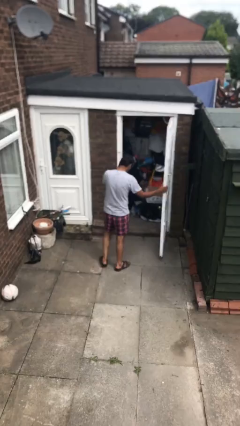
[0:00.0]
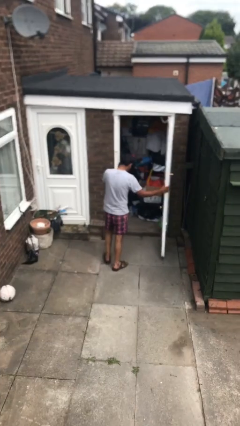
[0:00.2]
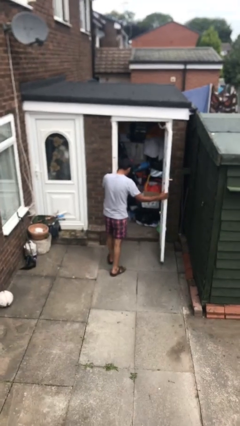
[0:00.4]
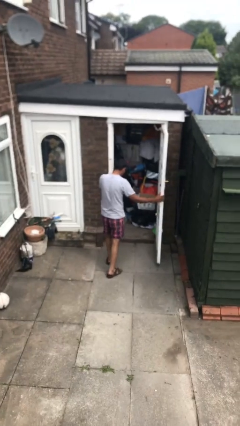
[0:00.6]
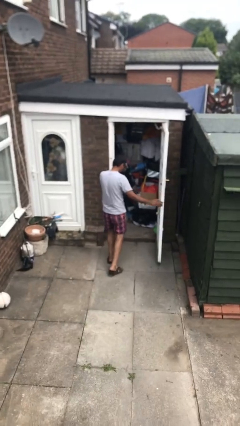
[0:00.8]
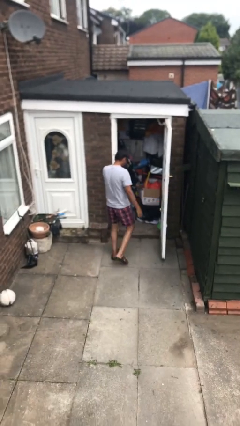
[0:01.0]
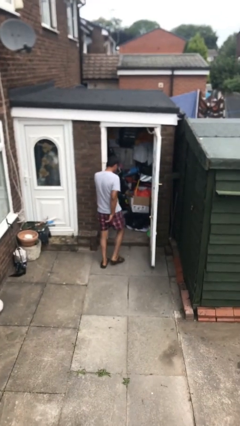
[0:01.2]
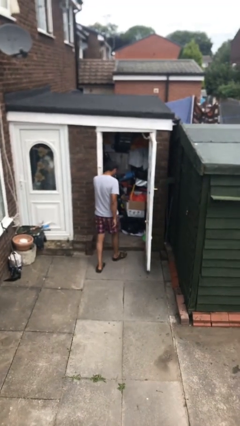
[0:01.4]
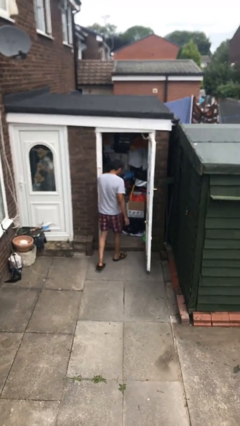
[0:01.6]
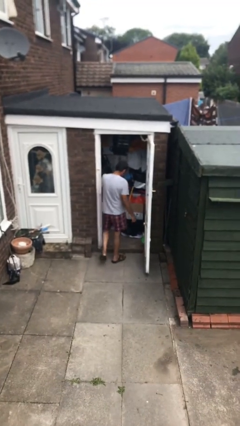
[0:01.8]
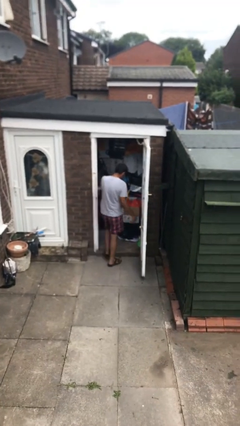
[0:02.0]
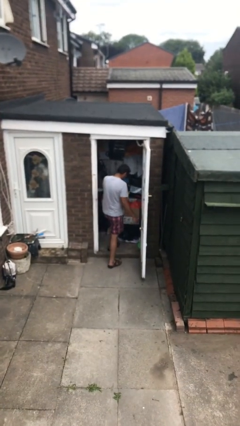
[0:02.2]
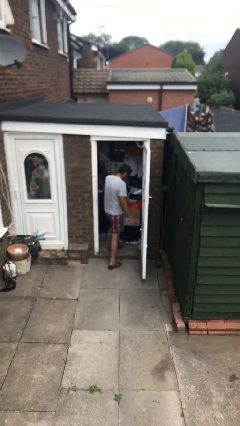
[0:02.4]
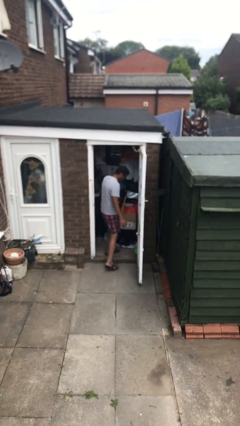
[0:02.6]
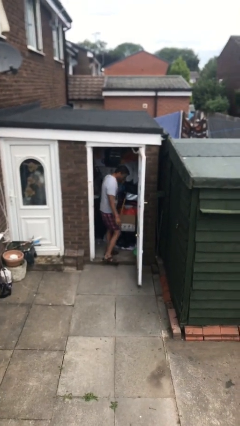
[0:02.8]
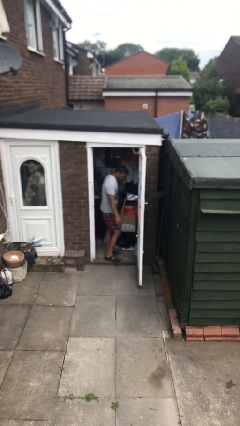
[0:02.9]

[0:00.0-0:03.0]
person exits scene through structure

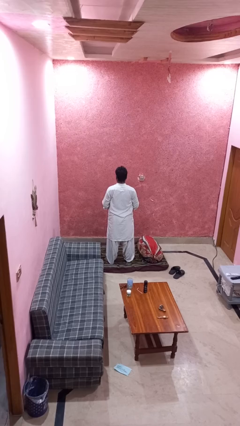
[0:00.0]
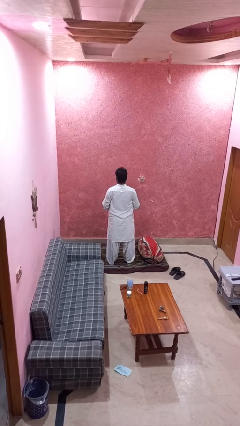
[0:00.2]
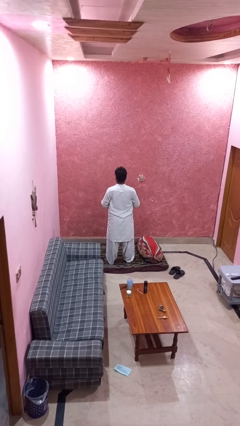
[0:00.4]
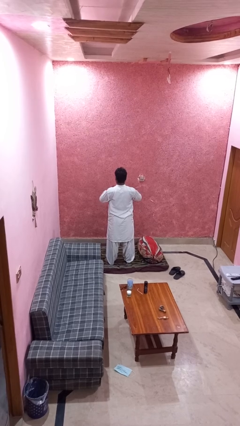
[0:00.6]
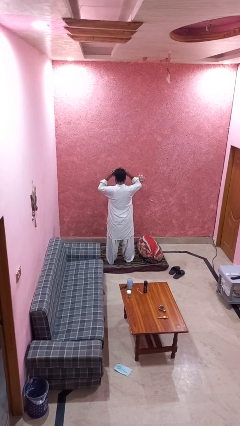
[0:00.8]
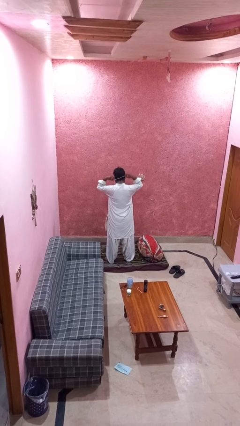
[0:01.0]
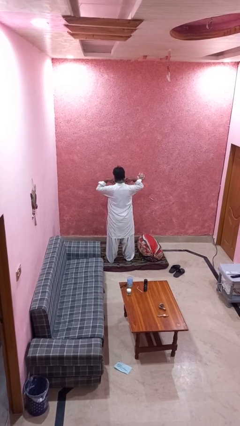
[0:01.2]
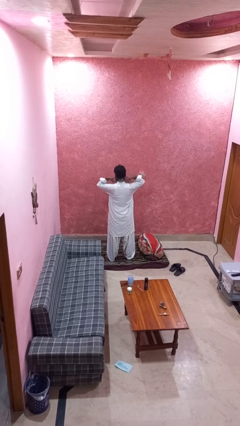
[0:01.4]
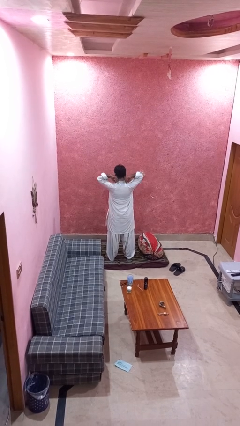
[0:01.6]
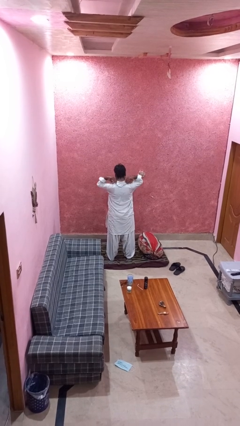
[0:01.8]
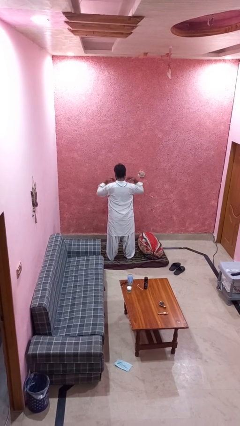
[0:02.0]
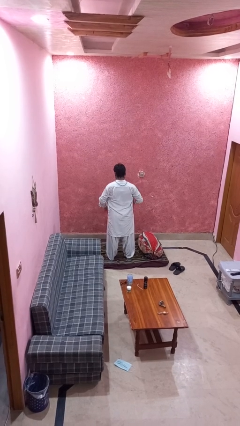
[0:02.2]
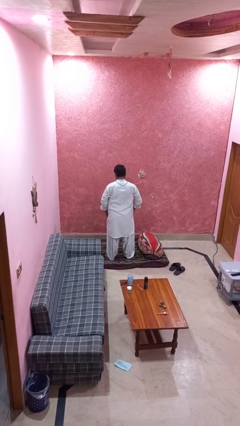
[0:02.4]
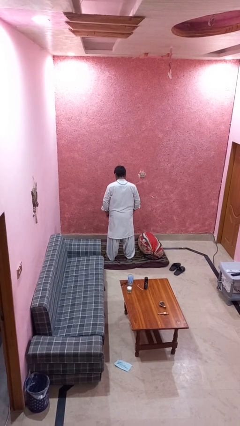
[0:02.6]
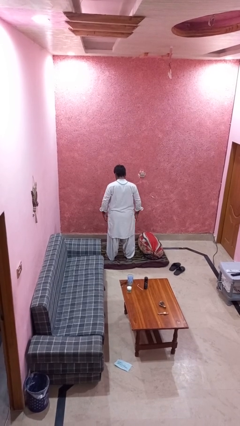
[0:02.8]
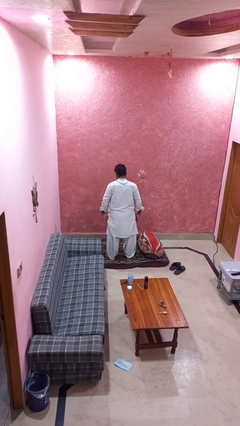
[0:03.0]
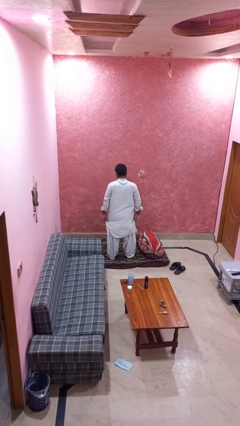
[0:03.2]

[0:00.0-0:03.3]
person puts on necklace

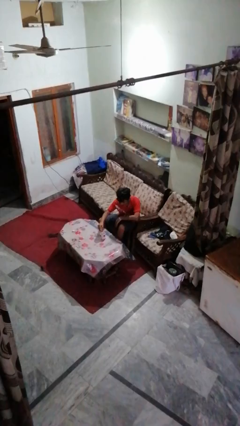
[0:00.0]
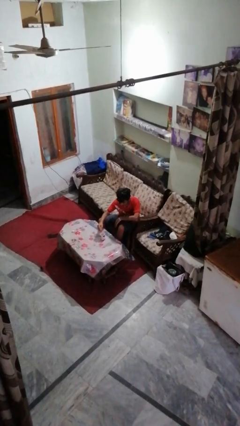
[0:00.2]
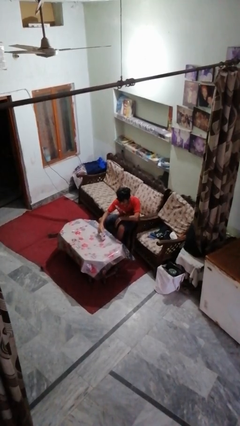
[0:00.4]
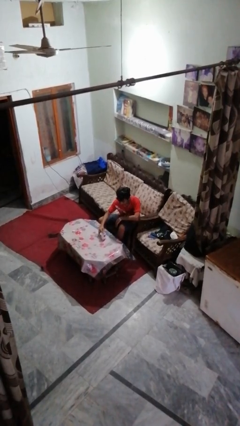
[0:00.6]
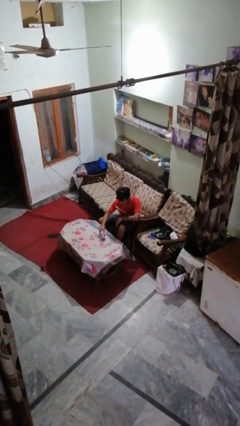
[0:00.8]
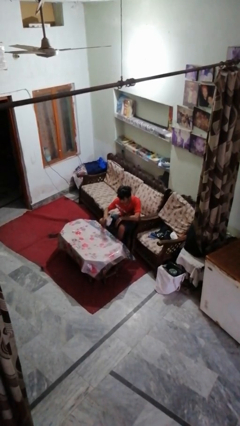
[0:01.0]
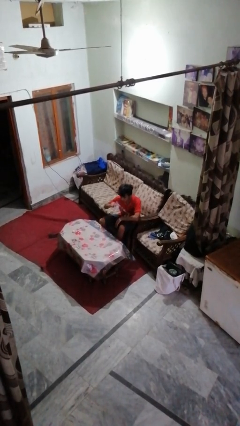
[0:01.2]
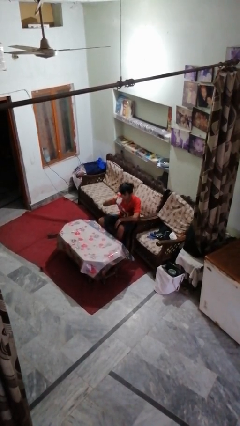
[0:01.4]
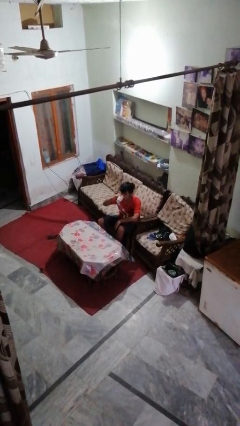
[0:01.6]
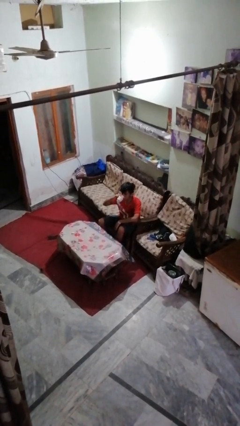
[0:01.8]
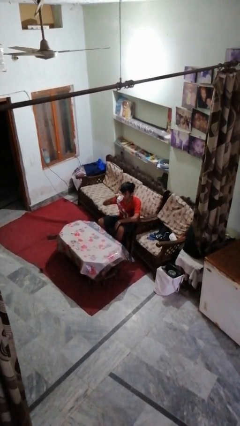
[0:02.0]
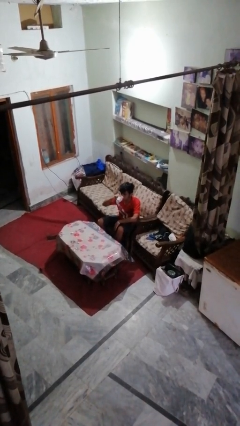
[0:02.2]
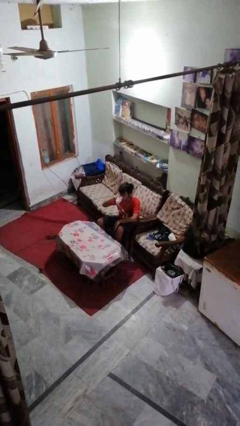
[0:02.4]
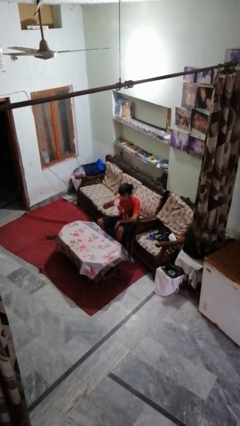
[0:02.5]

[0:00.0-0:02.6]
person drinks from mug

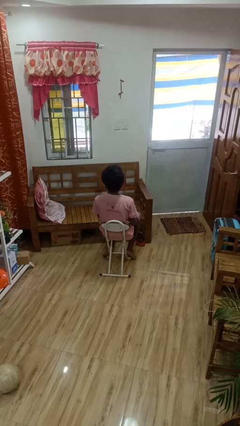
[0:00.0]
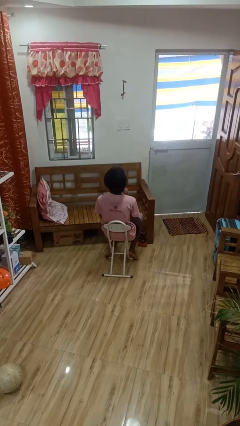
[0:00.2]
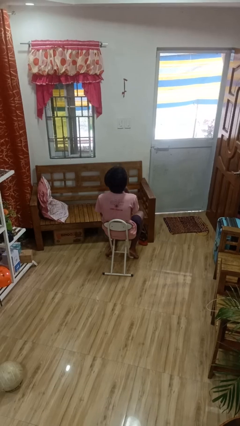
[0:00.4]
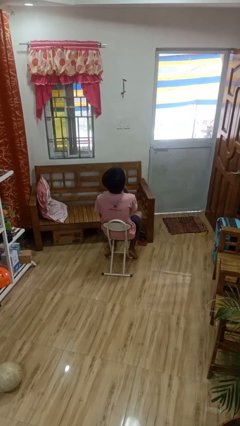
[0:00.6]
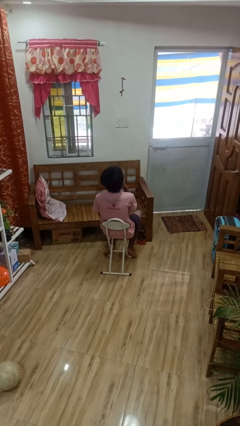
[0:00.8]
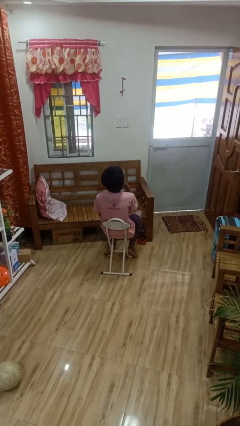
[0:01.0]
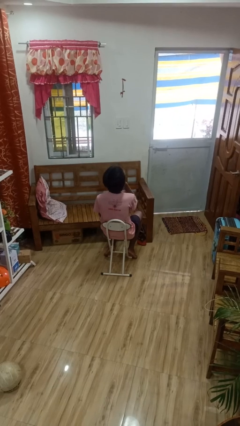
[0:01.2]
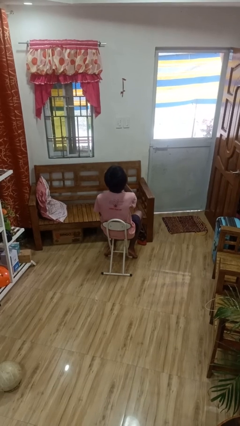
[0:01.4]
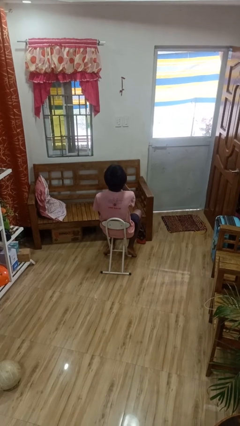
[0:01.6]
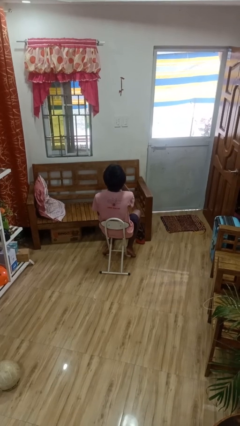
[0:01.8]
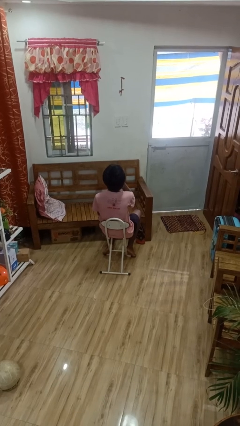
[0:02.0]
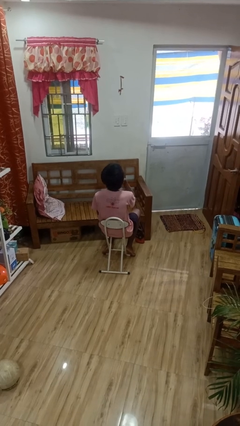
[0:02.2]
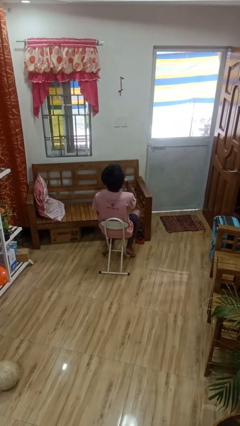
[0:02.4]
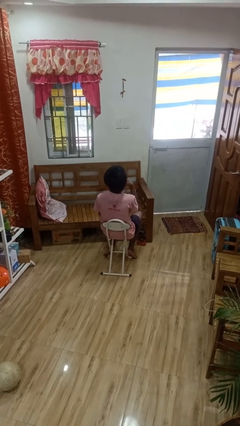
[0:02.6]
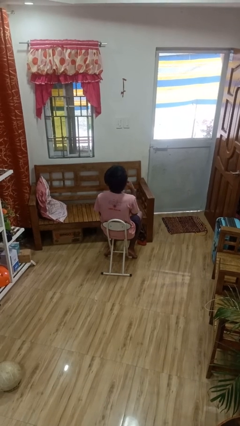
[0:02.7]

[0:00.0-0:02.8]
person strokes chin

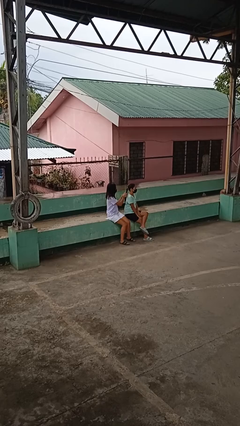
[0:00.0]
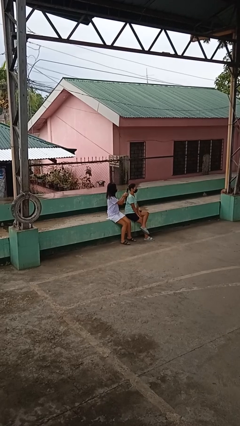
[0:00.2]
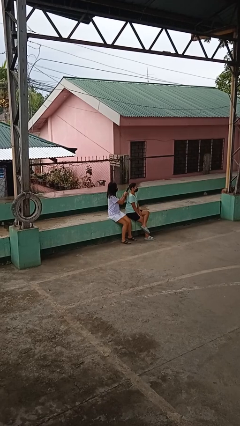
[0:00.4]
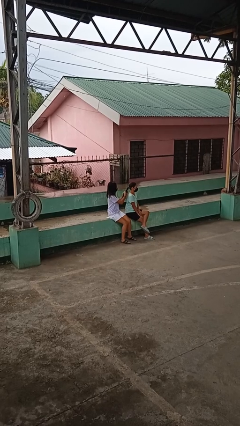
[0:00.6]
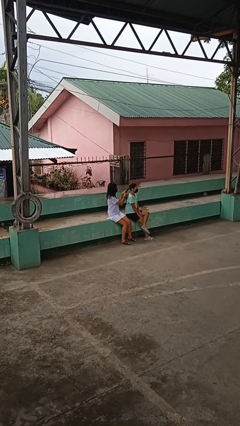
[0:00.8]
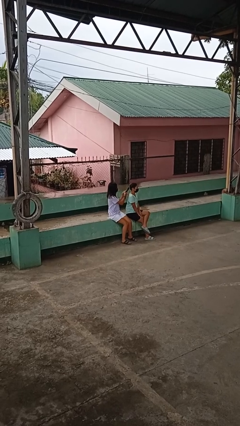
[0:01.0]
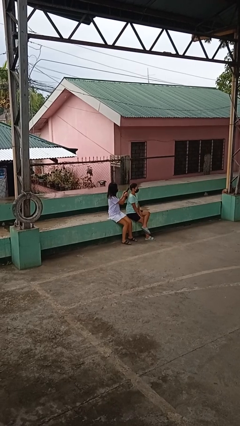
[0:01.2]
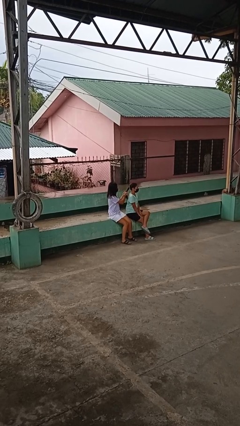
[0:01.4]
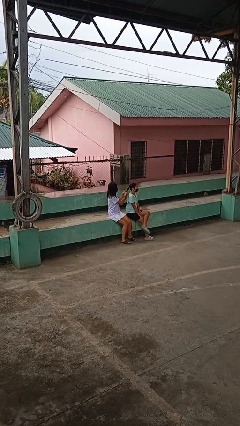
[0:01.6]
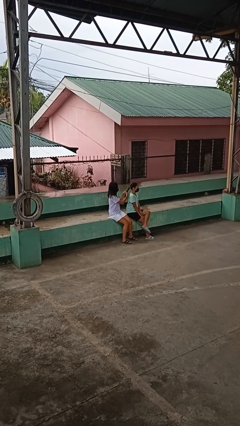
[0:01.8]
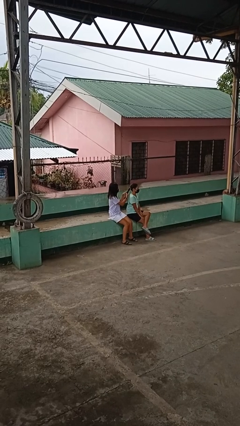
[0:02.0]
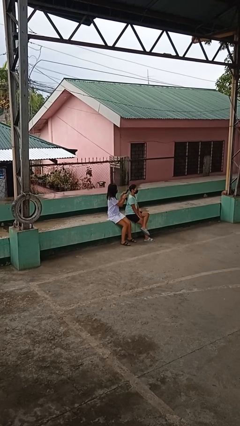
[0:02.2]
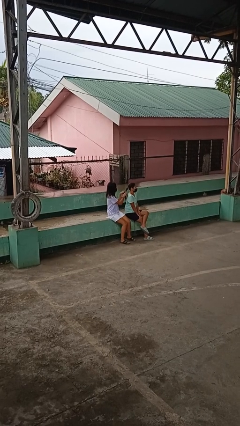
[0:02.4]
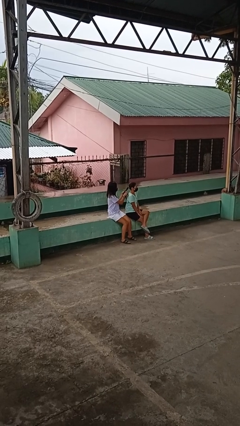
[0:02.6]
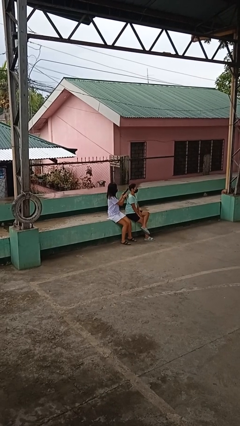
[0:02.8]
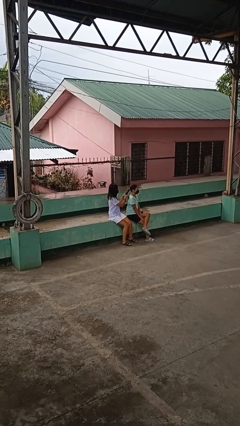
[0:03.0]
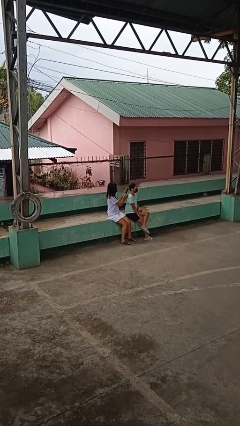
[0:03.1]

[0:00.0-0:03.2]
person braids hair of person

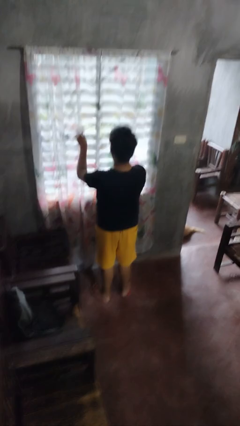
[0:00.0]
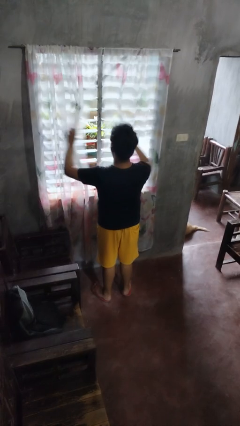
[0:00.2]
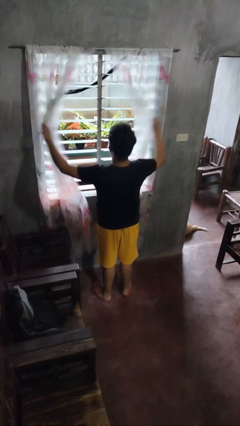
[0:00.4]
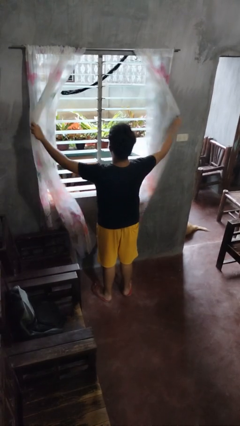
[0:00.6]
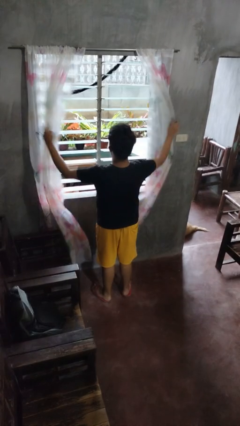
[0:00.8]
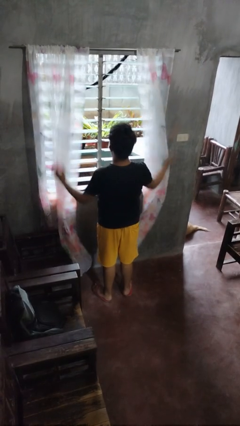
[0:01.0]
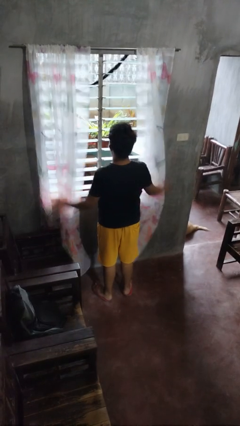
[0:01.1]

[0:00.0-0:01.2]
person opens curtains

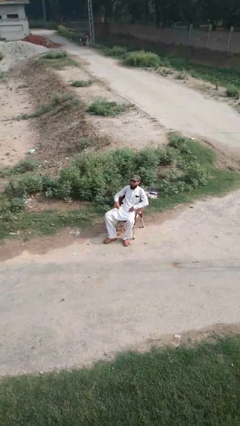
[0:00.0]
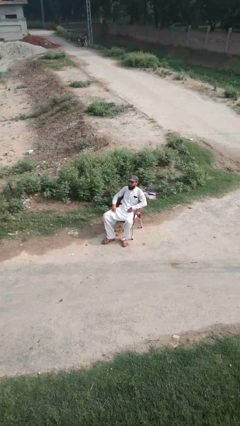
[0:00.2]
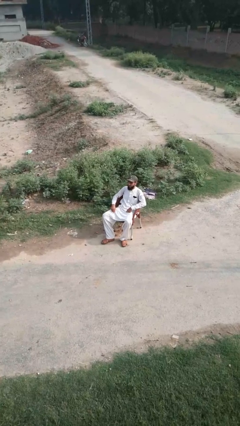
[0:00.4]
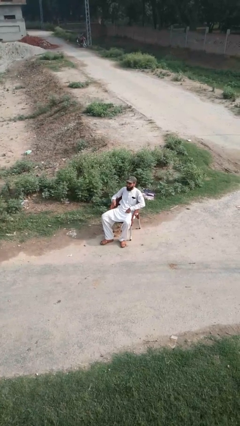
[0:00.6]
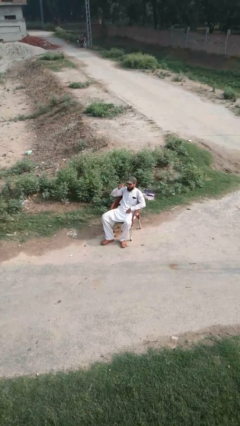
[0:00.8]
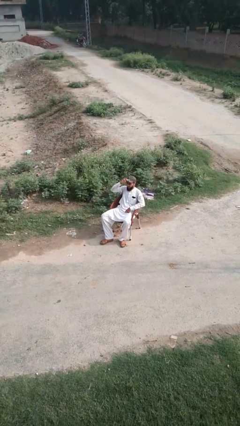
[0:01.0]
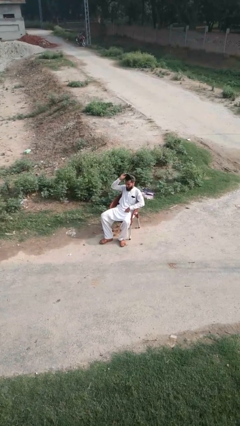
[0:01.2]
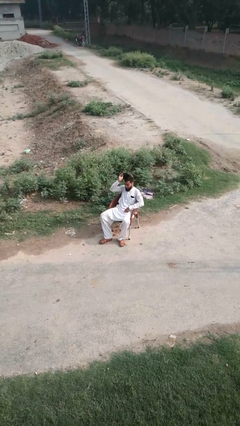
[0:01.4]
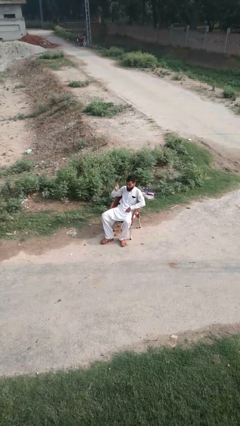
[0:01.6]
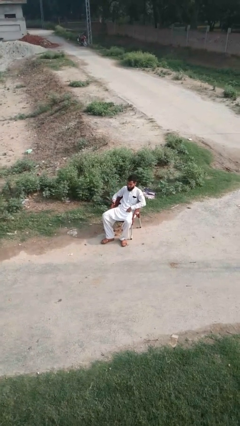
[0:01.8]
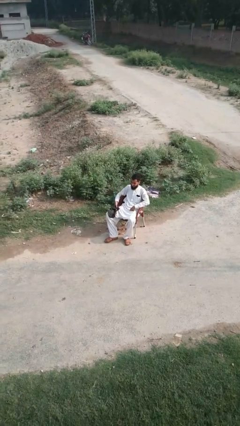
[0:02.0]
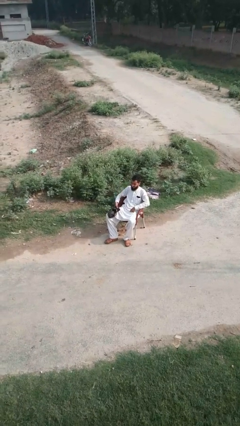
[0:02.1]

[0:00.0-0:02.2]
person takes off hat
